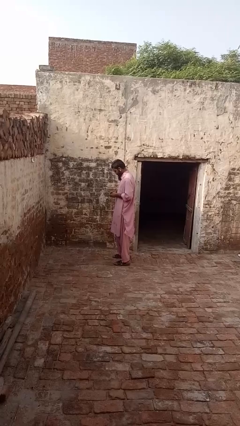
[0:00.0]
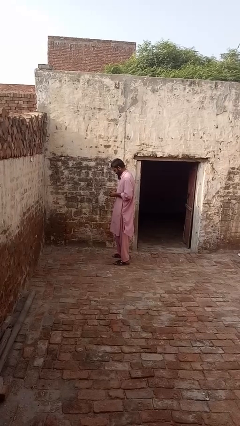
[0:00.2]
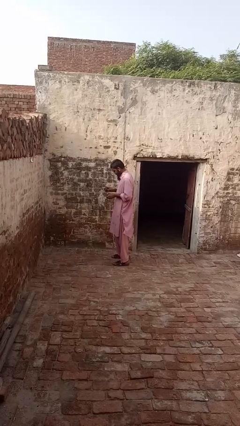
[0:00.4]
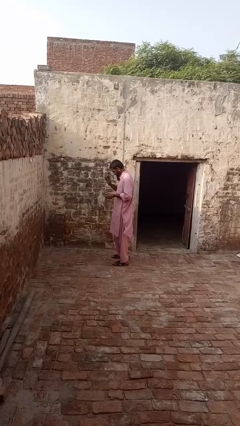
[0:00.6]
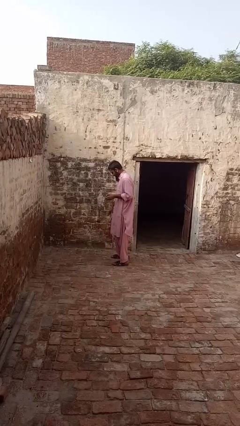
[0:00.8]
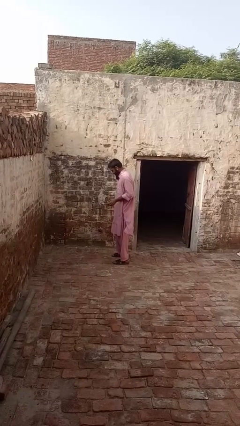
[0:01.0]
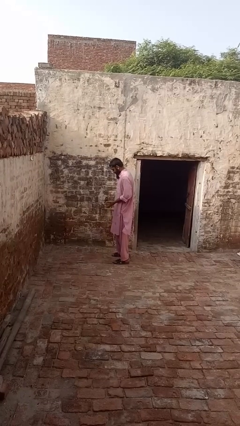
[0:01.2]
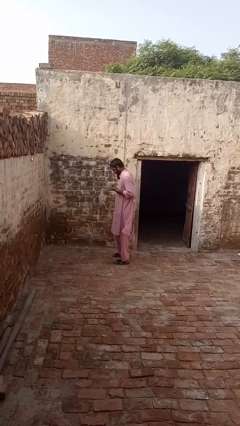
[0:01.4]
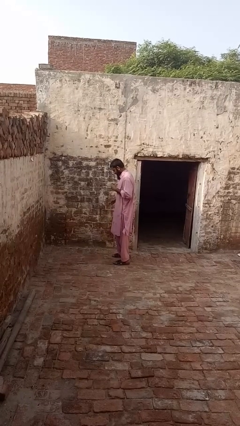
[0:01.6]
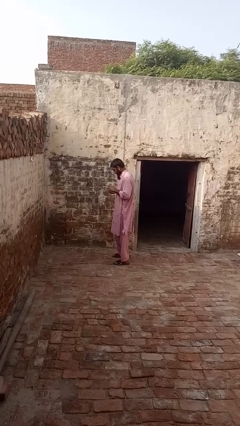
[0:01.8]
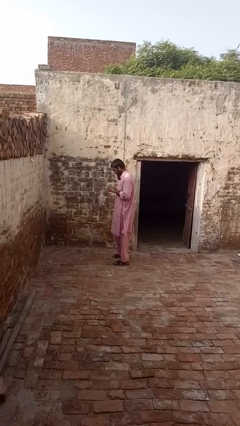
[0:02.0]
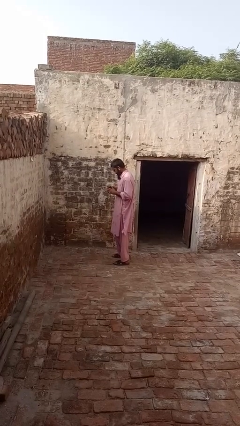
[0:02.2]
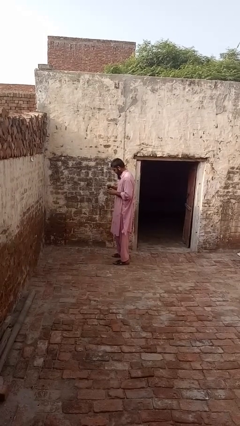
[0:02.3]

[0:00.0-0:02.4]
person bounces ball on floor

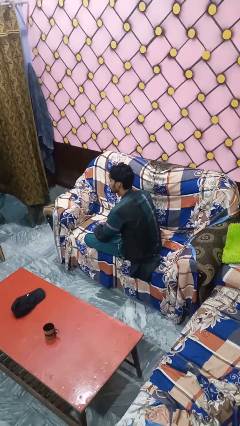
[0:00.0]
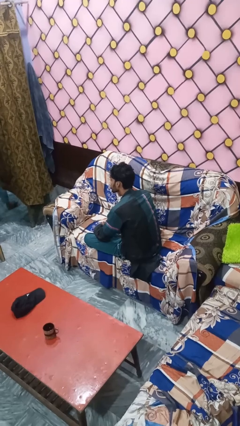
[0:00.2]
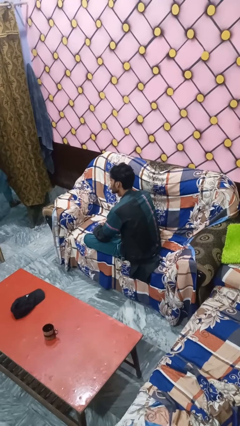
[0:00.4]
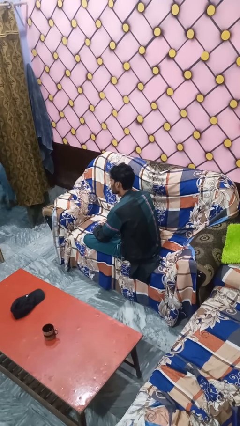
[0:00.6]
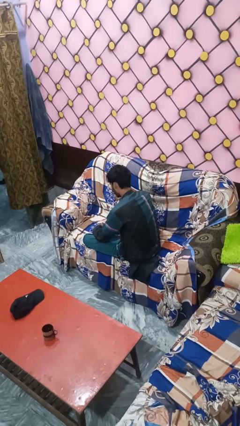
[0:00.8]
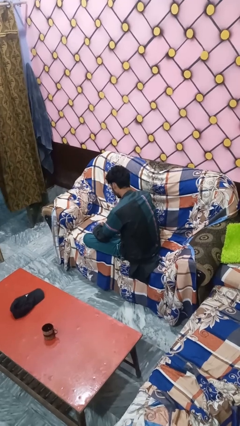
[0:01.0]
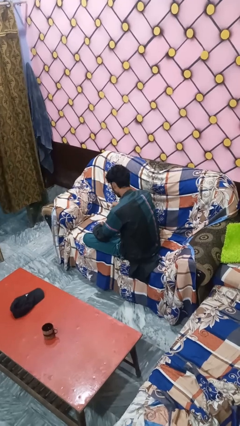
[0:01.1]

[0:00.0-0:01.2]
person gestures cut

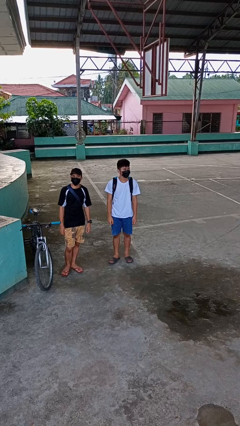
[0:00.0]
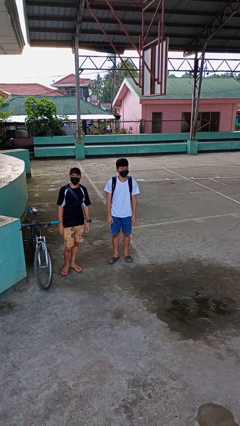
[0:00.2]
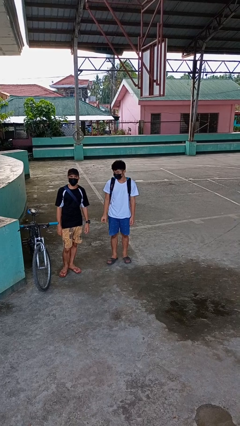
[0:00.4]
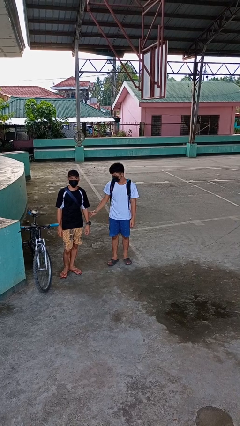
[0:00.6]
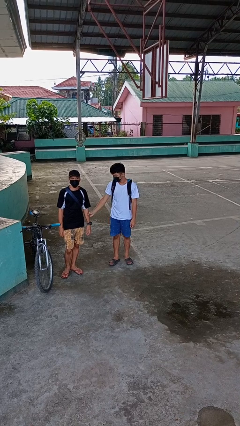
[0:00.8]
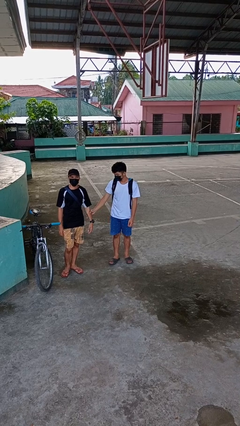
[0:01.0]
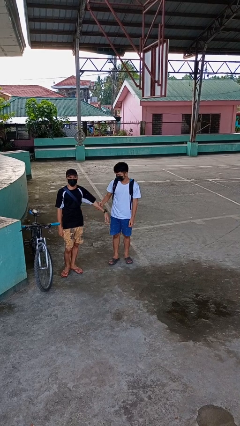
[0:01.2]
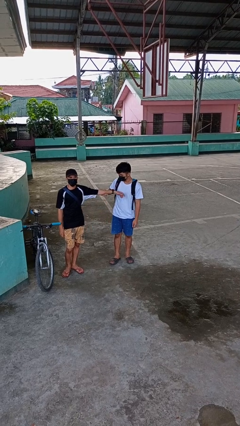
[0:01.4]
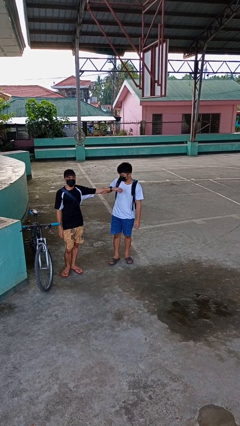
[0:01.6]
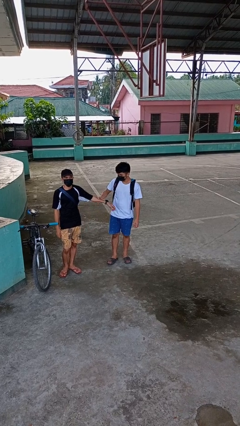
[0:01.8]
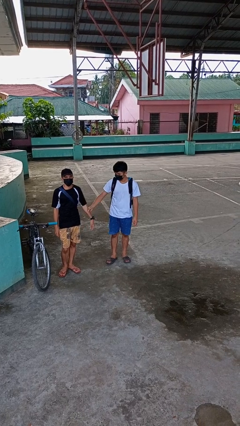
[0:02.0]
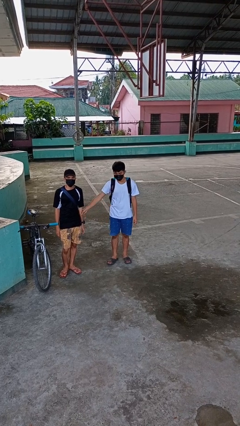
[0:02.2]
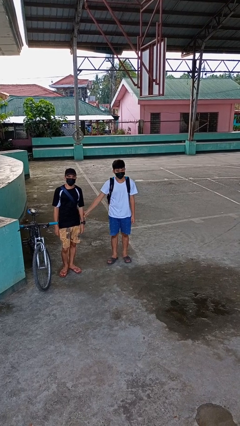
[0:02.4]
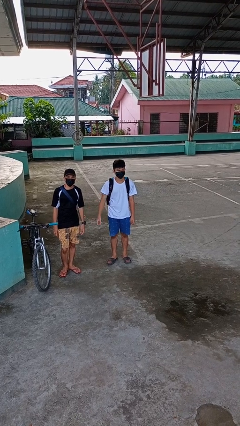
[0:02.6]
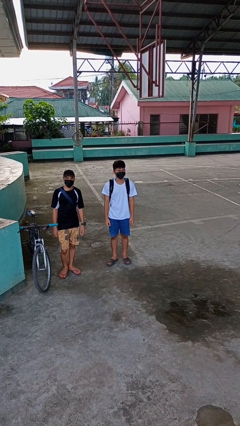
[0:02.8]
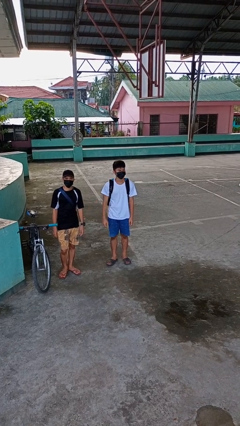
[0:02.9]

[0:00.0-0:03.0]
person grabs person by forearm

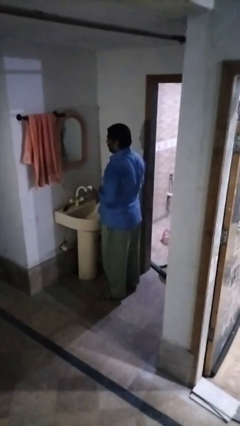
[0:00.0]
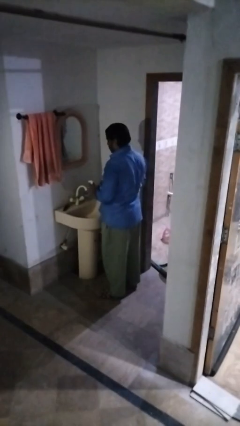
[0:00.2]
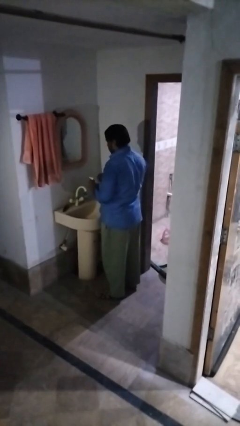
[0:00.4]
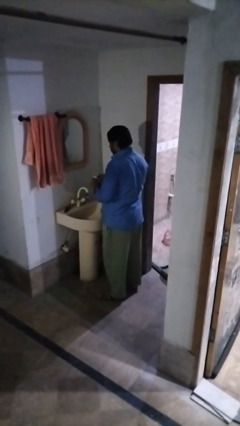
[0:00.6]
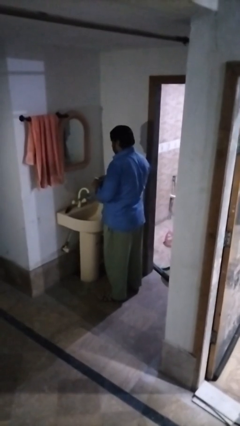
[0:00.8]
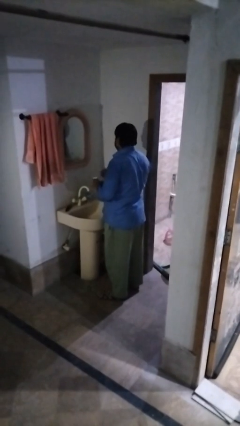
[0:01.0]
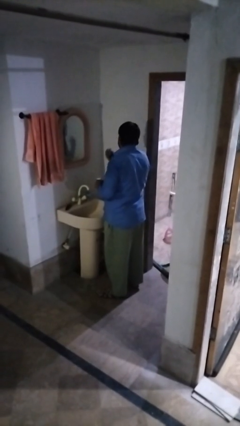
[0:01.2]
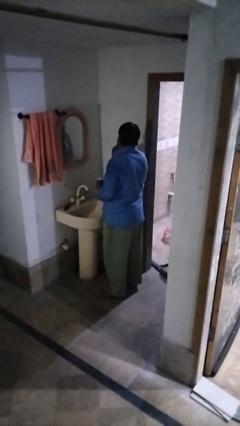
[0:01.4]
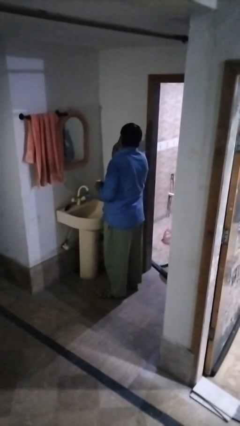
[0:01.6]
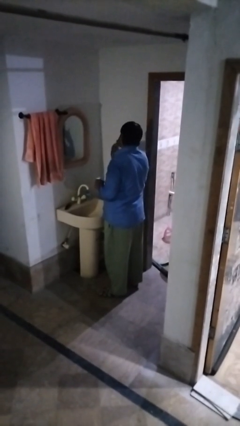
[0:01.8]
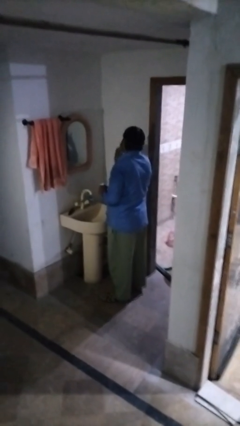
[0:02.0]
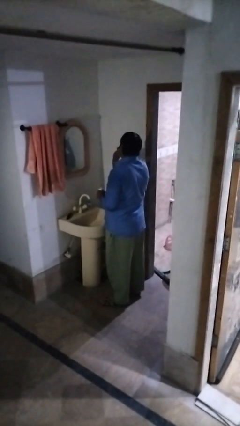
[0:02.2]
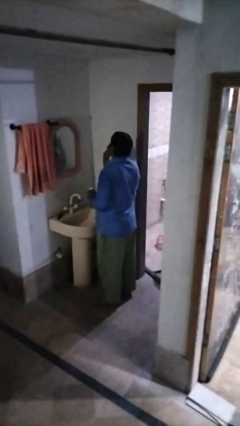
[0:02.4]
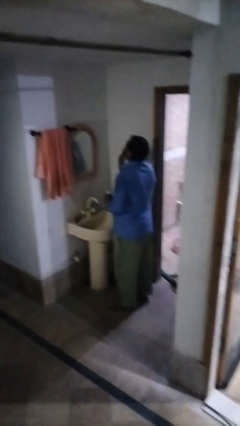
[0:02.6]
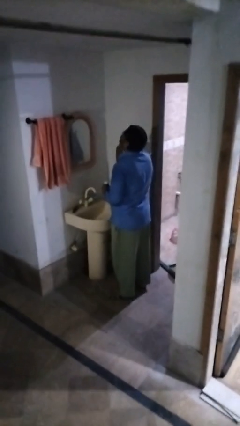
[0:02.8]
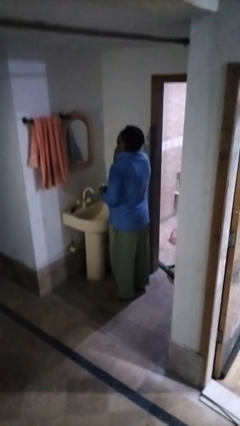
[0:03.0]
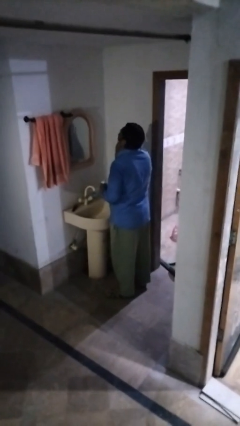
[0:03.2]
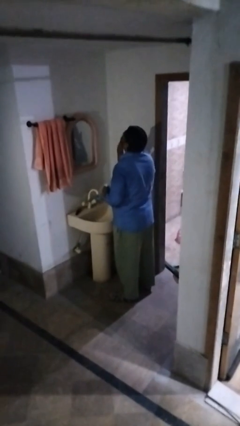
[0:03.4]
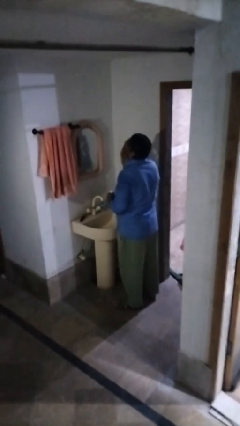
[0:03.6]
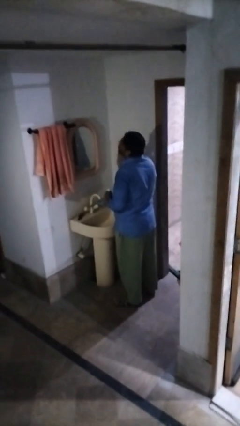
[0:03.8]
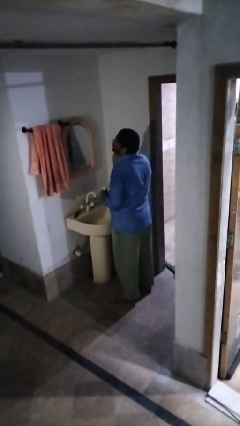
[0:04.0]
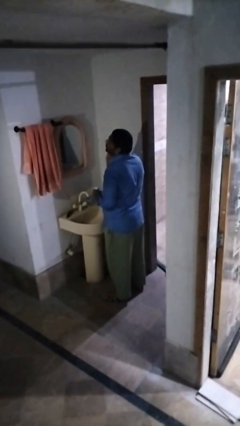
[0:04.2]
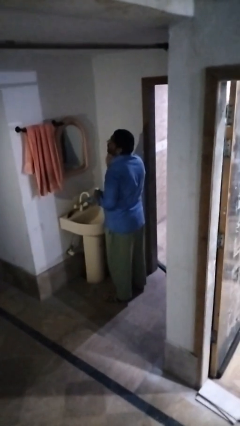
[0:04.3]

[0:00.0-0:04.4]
person applies shaving cream

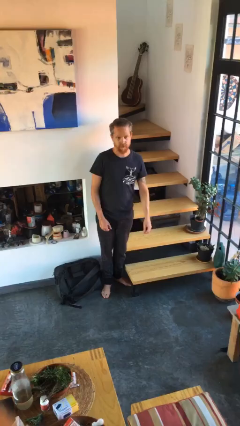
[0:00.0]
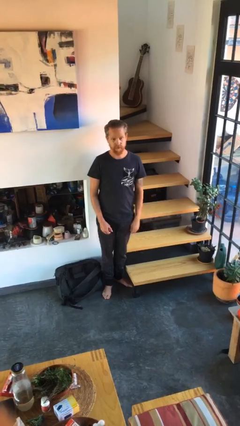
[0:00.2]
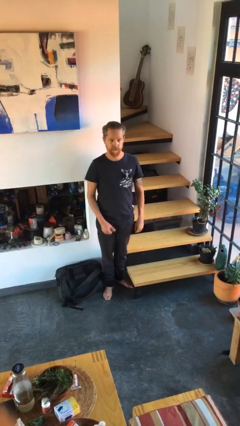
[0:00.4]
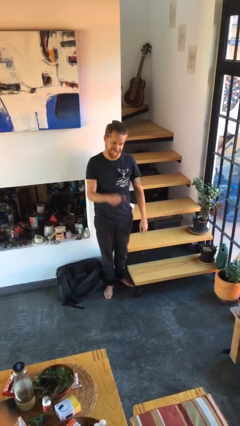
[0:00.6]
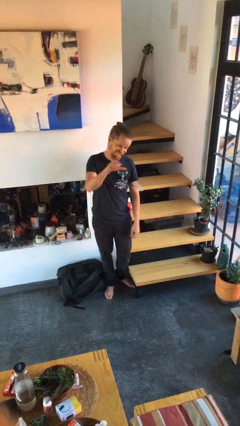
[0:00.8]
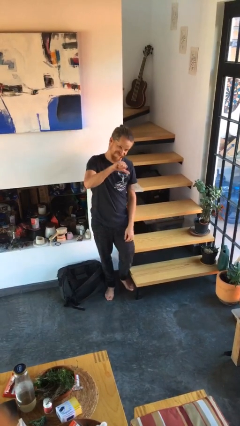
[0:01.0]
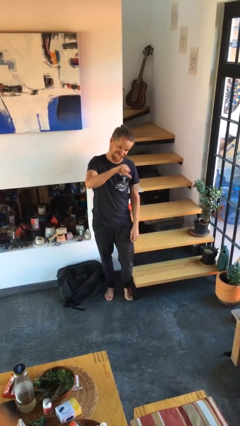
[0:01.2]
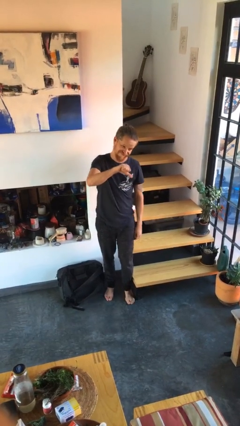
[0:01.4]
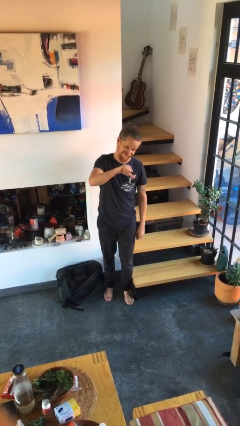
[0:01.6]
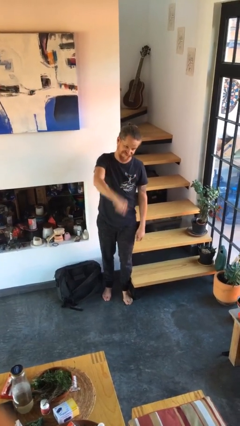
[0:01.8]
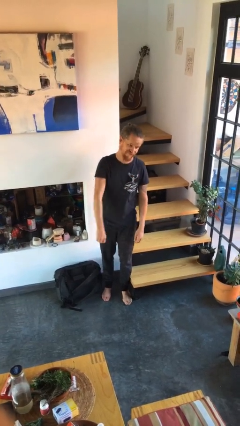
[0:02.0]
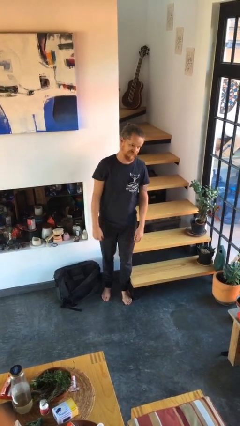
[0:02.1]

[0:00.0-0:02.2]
person gestures thumbs down

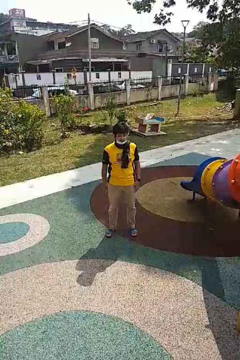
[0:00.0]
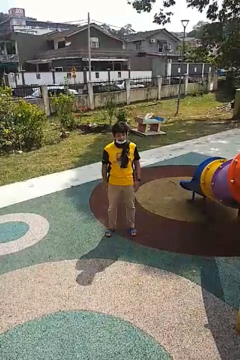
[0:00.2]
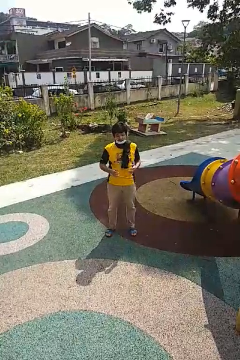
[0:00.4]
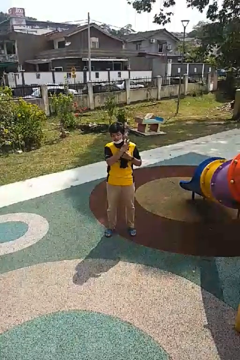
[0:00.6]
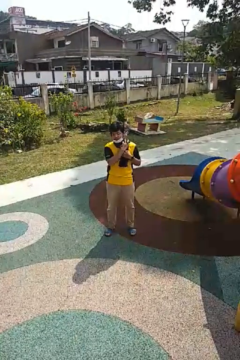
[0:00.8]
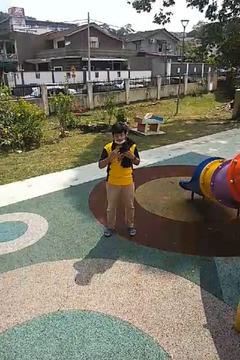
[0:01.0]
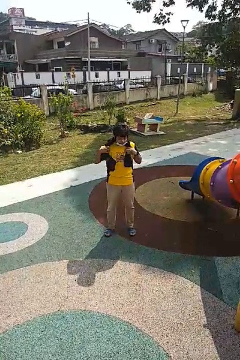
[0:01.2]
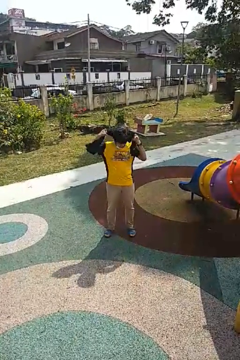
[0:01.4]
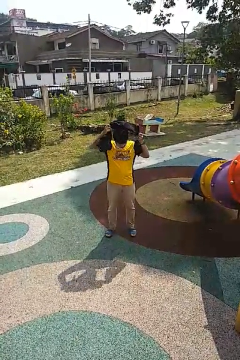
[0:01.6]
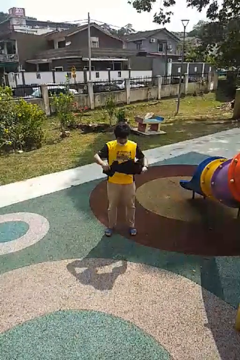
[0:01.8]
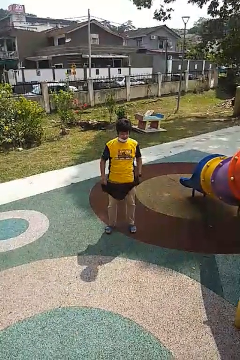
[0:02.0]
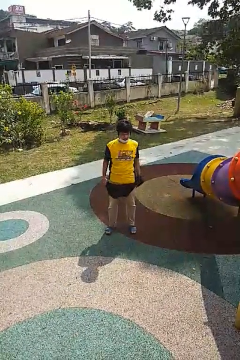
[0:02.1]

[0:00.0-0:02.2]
person takes off scarf

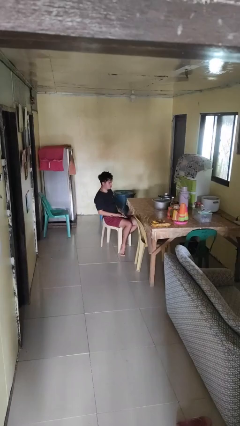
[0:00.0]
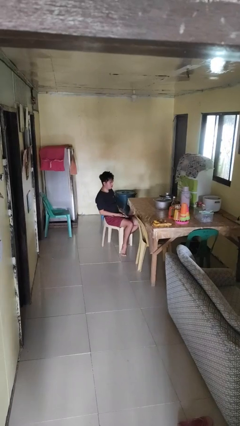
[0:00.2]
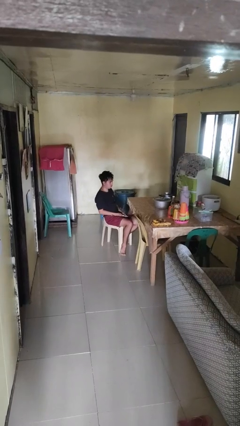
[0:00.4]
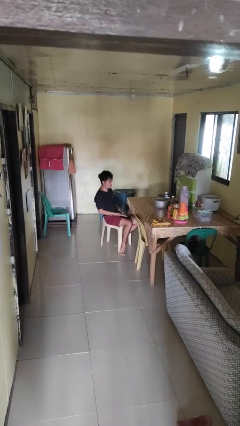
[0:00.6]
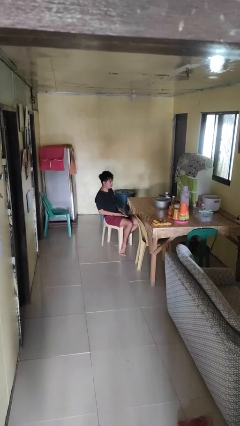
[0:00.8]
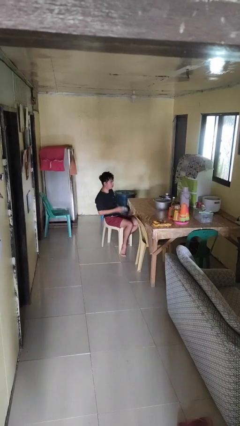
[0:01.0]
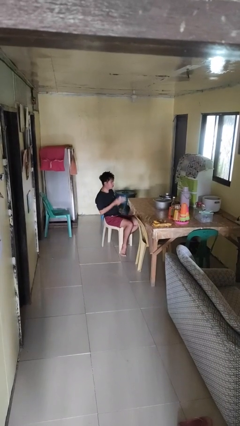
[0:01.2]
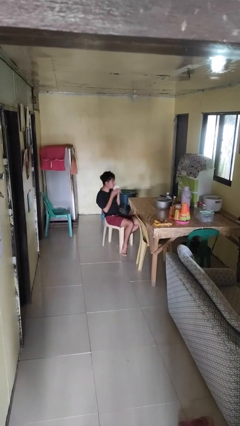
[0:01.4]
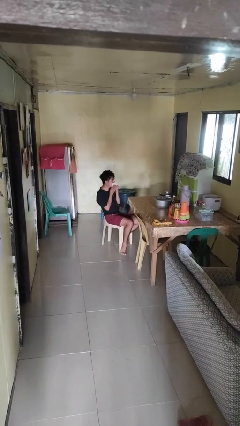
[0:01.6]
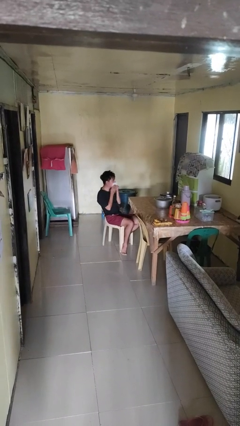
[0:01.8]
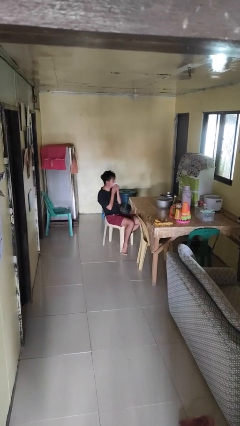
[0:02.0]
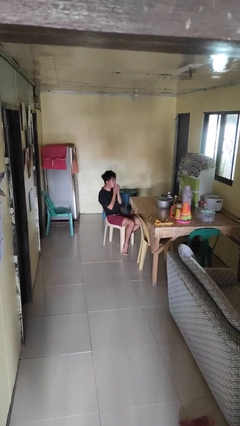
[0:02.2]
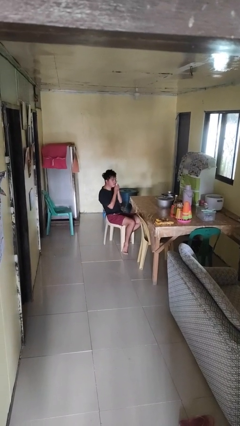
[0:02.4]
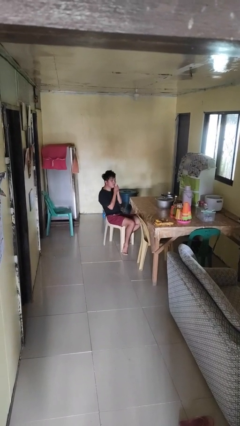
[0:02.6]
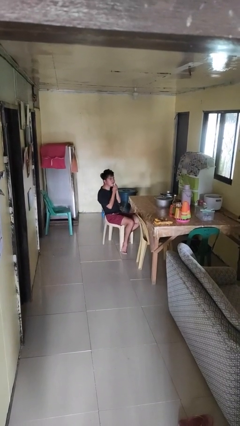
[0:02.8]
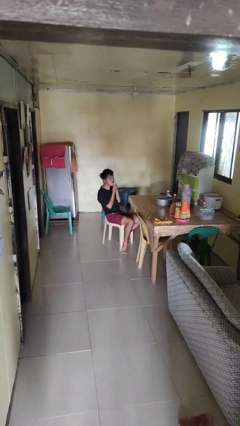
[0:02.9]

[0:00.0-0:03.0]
person wipes mouth with napkin
